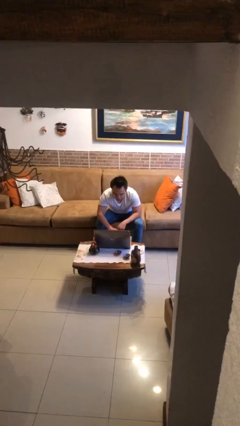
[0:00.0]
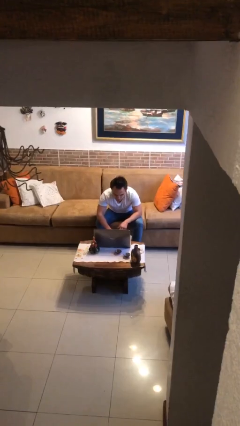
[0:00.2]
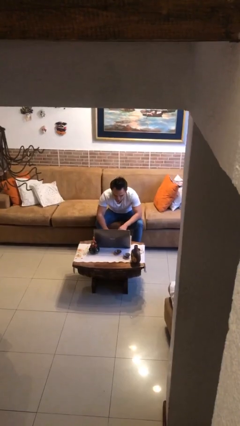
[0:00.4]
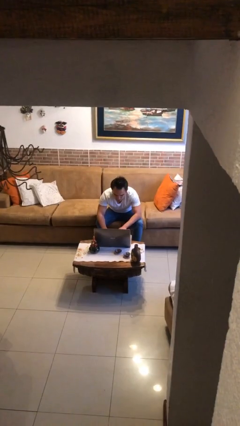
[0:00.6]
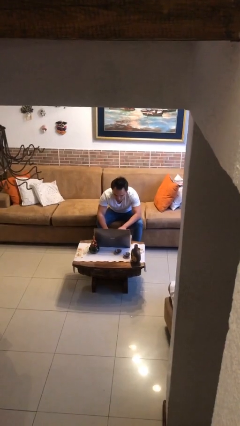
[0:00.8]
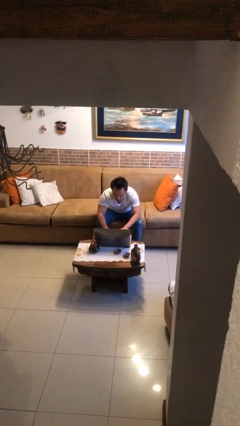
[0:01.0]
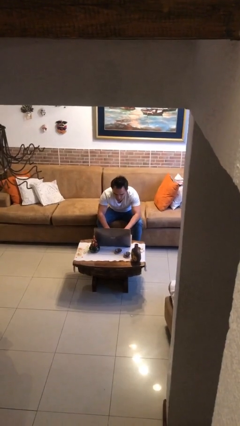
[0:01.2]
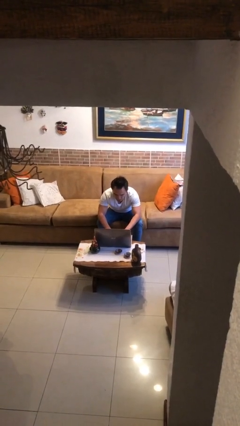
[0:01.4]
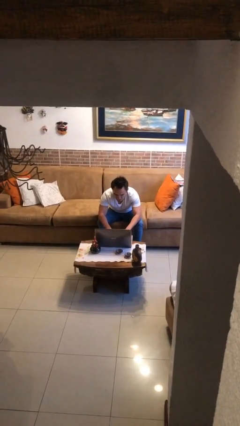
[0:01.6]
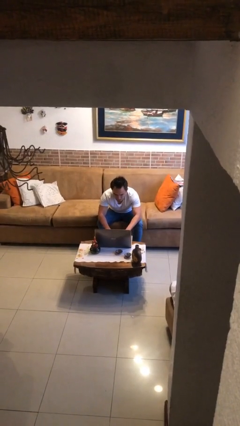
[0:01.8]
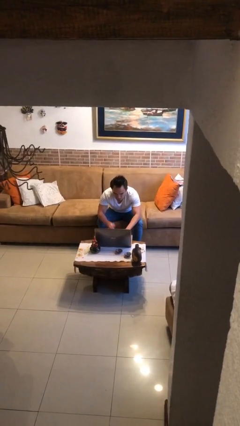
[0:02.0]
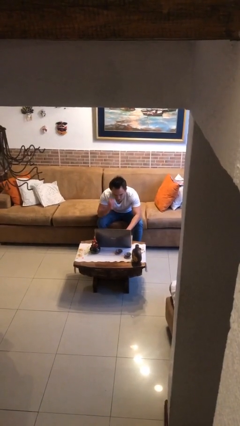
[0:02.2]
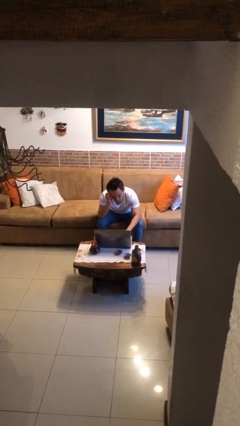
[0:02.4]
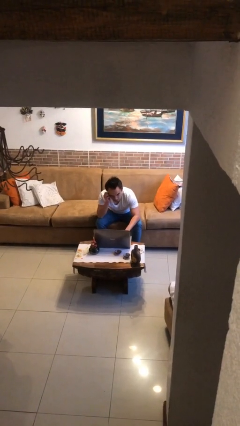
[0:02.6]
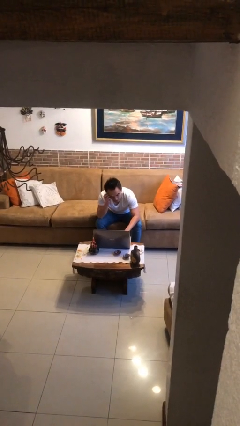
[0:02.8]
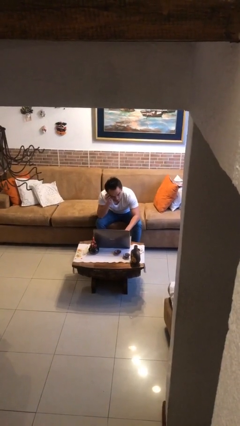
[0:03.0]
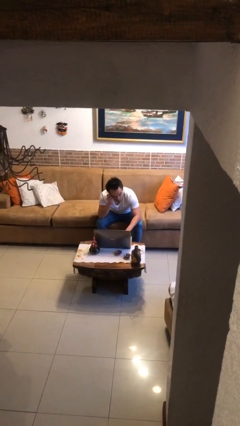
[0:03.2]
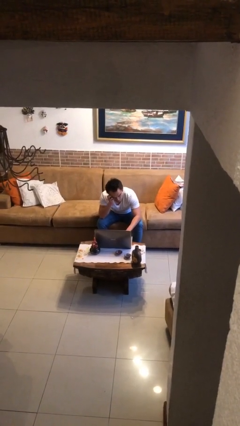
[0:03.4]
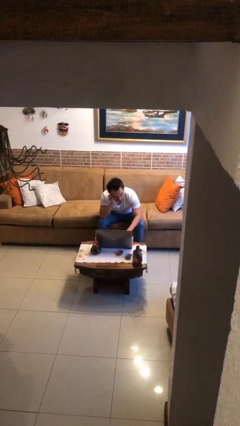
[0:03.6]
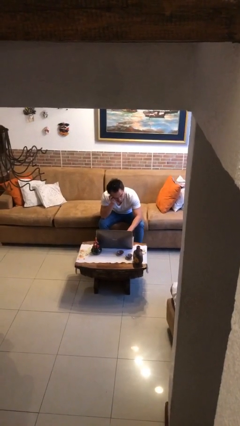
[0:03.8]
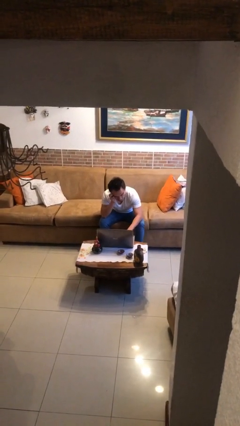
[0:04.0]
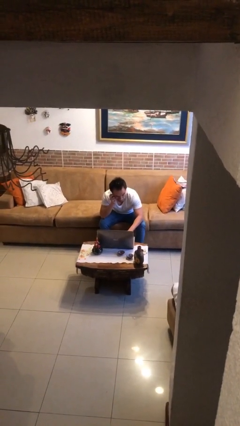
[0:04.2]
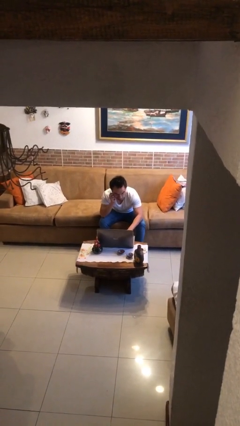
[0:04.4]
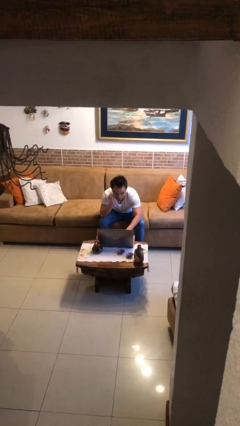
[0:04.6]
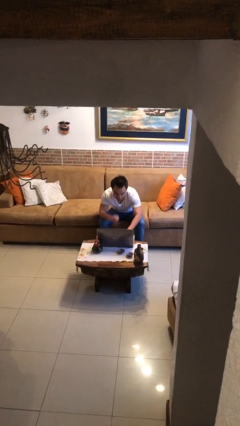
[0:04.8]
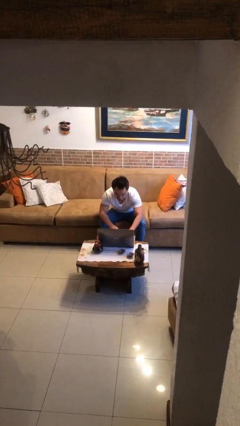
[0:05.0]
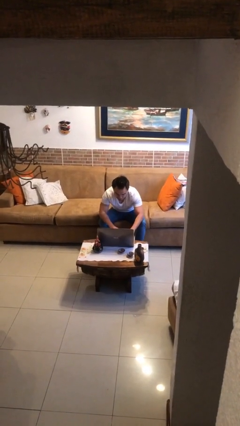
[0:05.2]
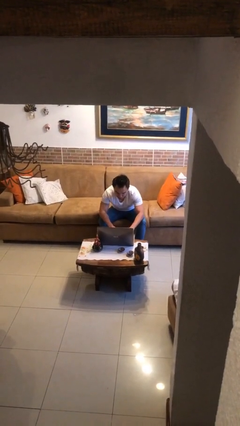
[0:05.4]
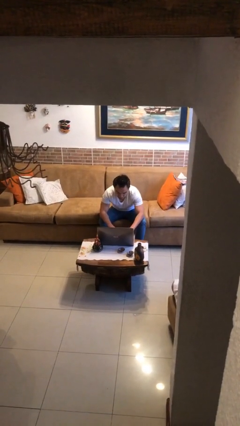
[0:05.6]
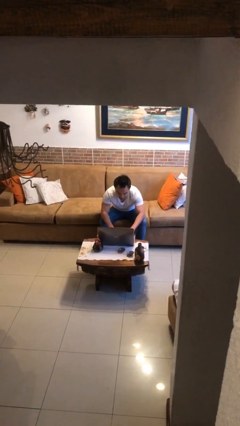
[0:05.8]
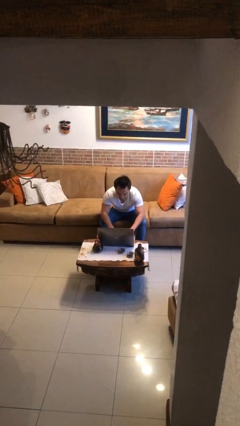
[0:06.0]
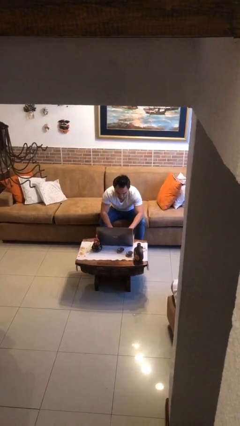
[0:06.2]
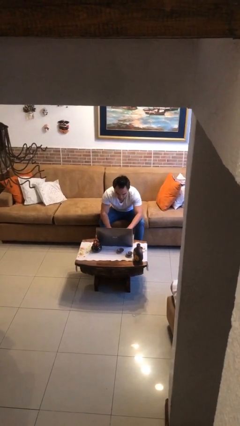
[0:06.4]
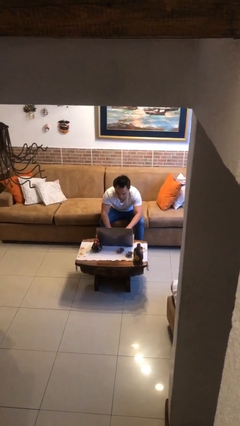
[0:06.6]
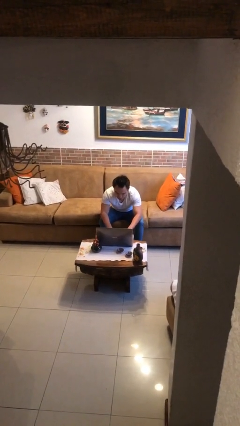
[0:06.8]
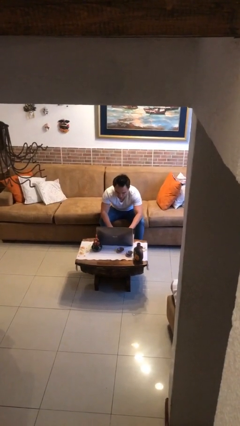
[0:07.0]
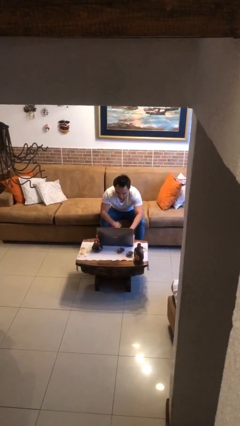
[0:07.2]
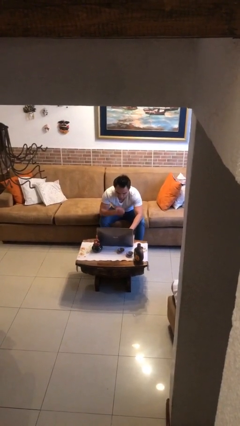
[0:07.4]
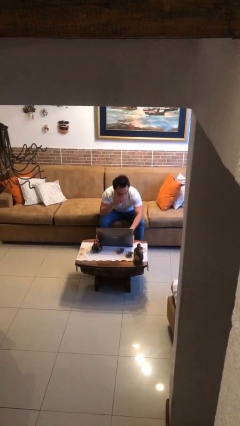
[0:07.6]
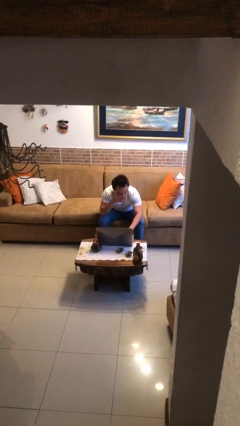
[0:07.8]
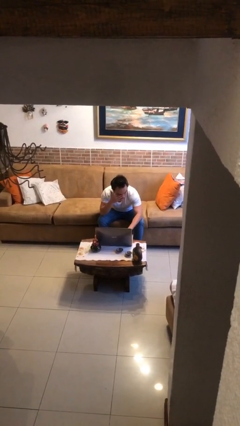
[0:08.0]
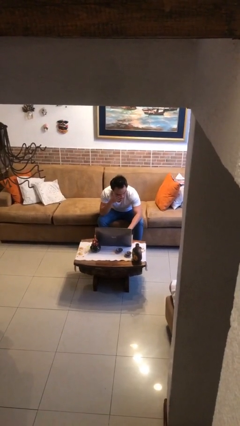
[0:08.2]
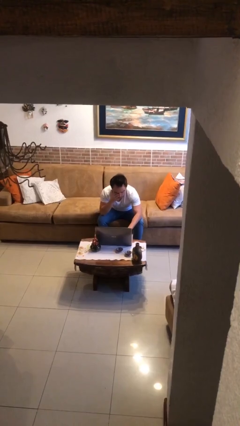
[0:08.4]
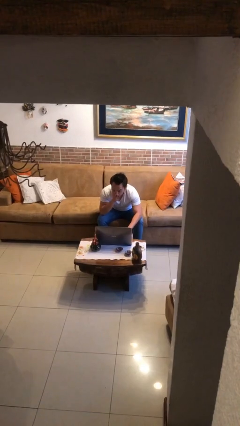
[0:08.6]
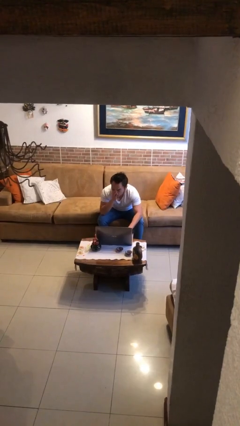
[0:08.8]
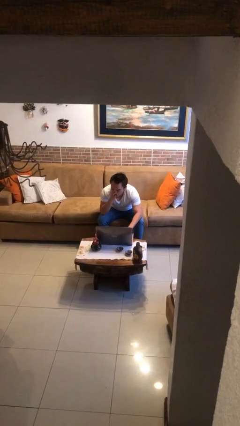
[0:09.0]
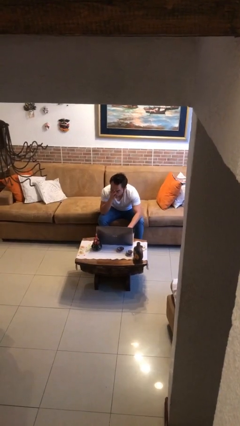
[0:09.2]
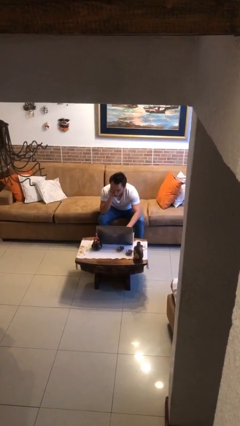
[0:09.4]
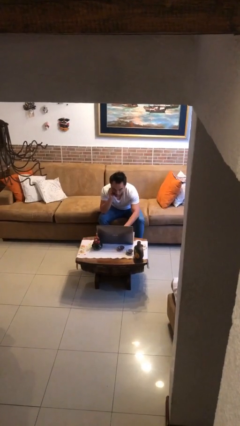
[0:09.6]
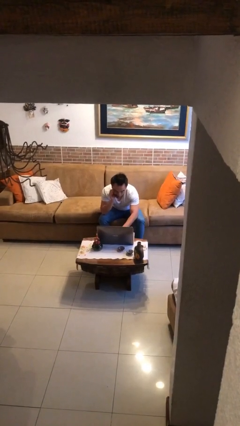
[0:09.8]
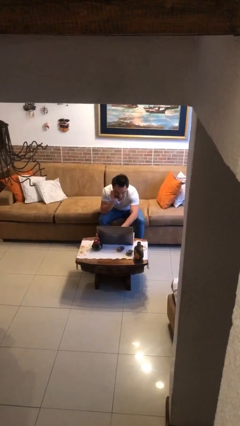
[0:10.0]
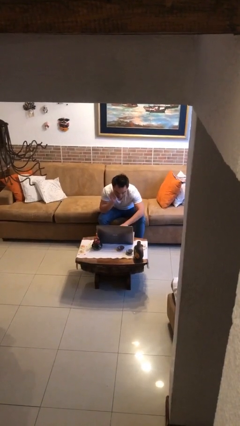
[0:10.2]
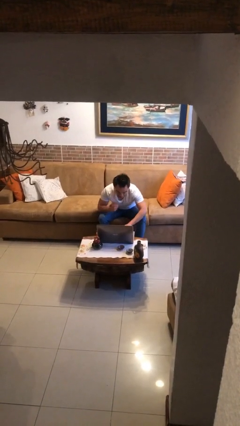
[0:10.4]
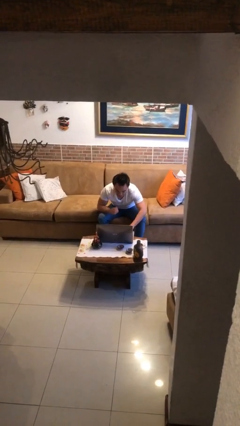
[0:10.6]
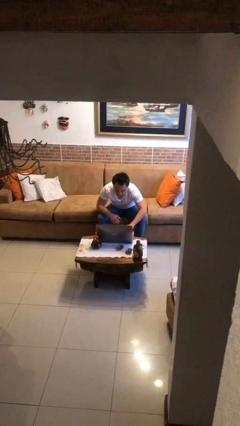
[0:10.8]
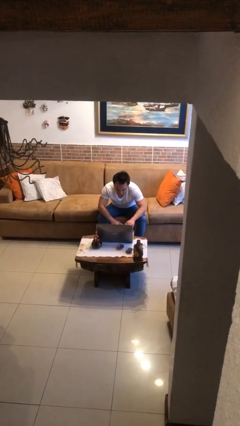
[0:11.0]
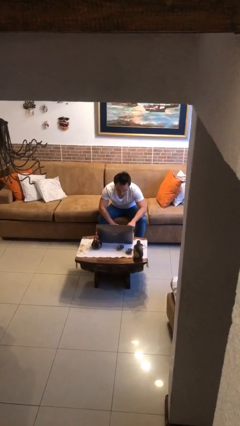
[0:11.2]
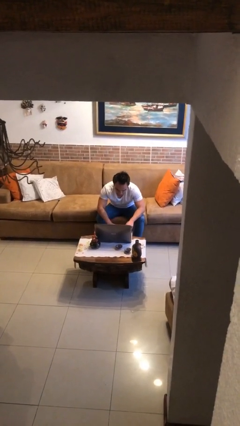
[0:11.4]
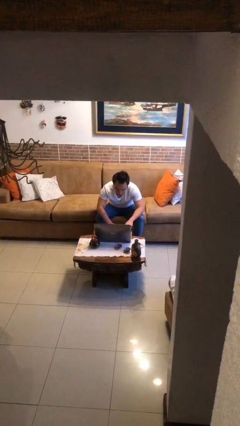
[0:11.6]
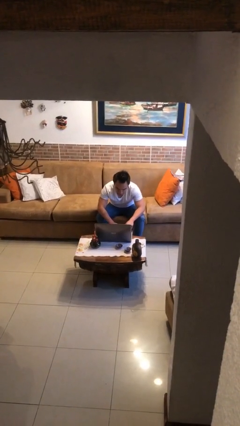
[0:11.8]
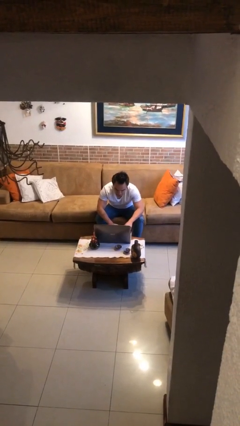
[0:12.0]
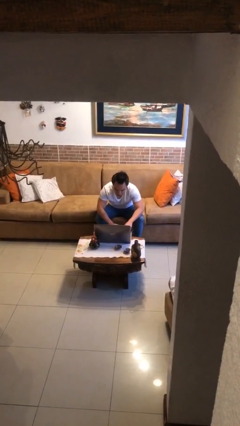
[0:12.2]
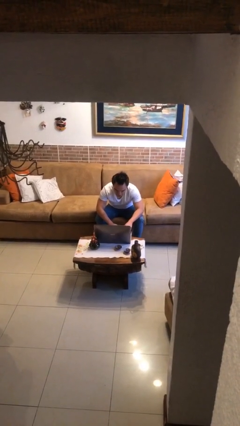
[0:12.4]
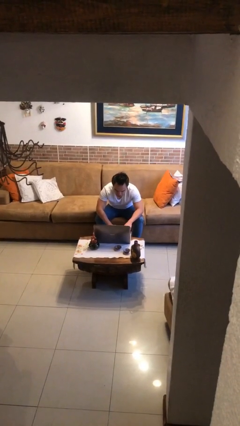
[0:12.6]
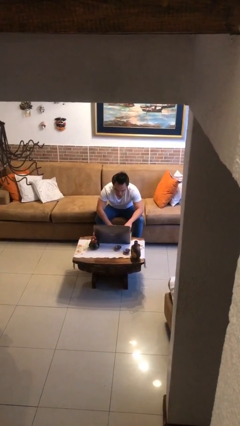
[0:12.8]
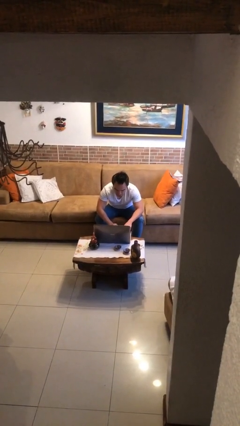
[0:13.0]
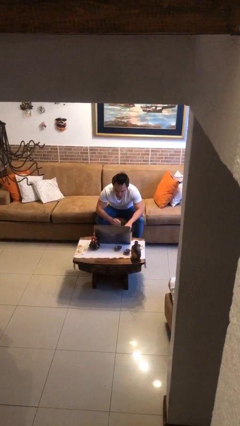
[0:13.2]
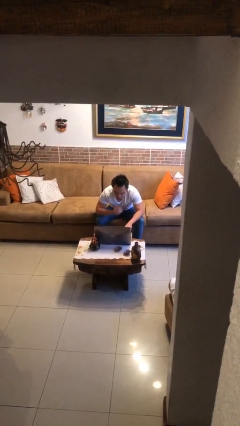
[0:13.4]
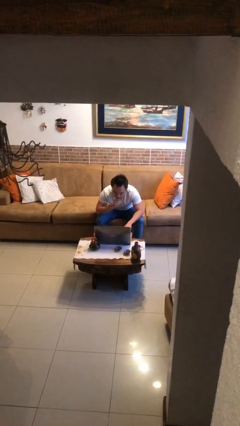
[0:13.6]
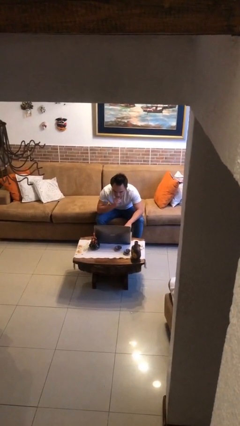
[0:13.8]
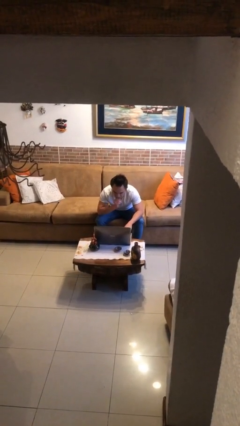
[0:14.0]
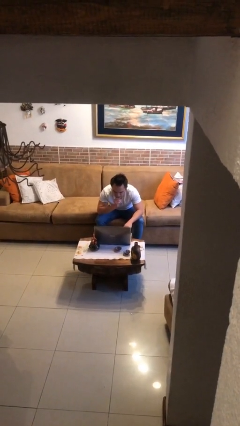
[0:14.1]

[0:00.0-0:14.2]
person interacts with laptop

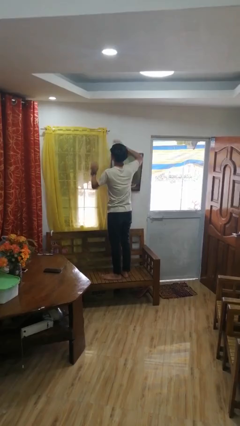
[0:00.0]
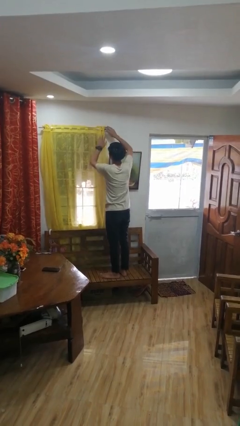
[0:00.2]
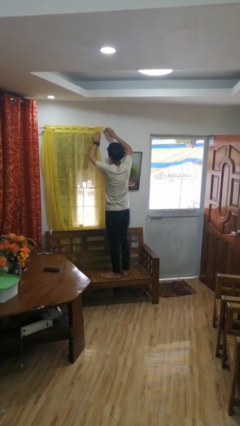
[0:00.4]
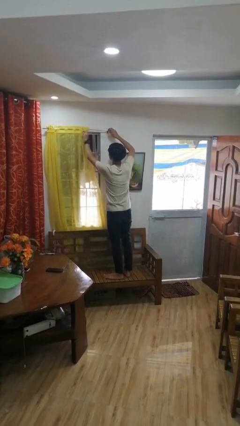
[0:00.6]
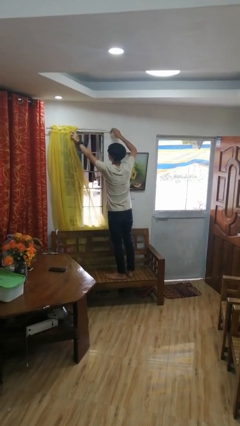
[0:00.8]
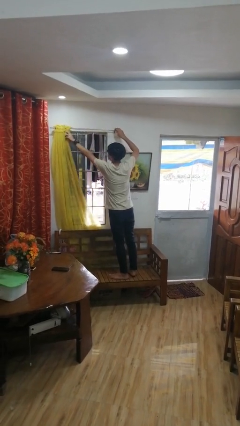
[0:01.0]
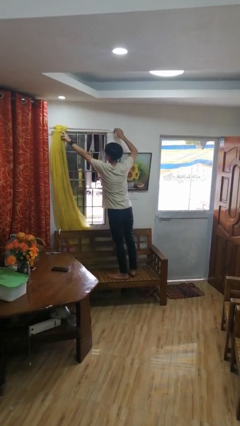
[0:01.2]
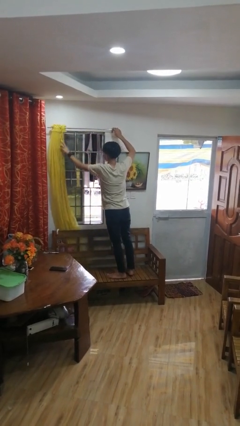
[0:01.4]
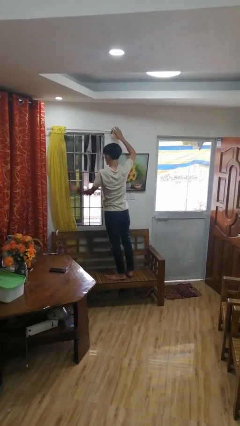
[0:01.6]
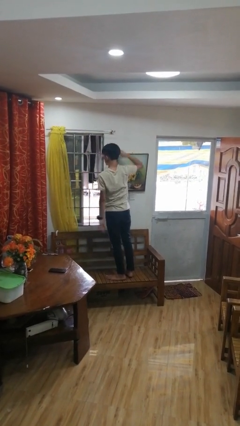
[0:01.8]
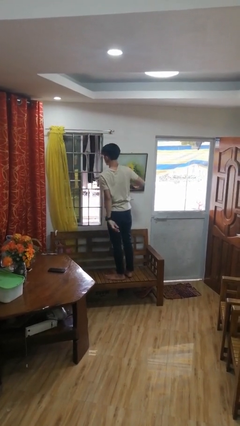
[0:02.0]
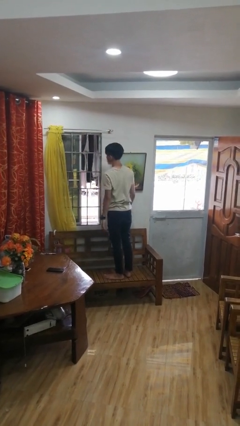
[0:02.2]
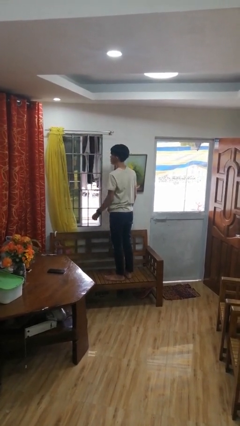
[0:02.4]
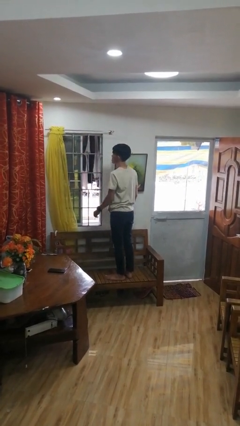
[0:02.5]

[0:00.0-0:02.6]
person opens curtains

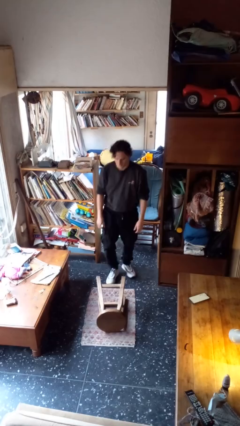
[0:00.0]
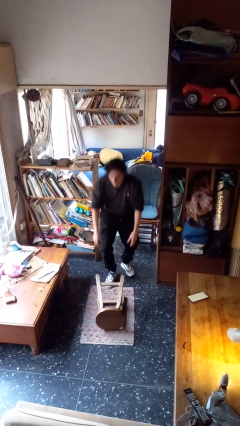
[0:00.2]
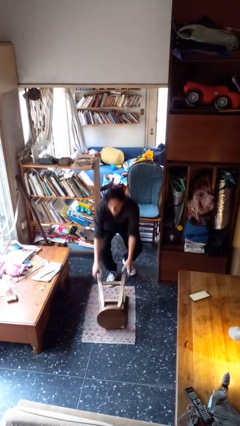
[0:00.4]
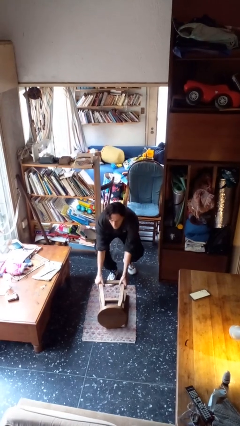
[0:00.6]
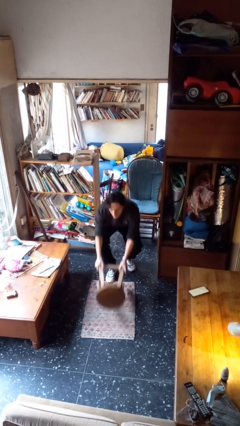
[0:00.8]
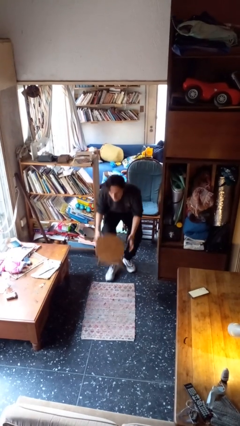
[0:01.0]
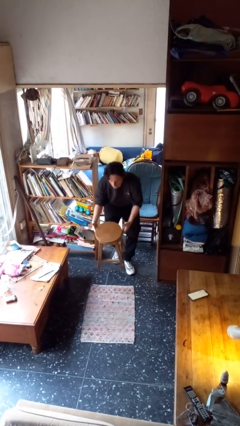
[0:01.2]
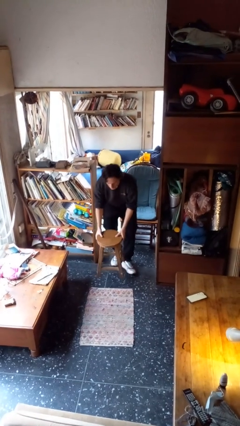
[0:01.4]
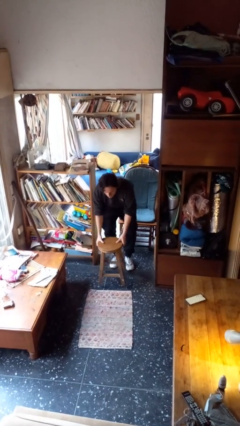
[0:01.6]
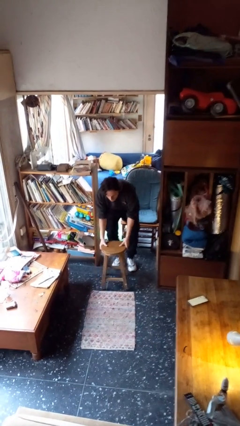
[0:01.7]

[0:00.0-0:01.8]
person sets upright furniture
